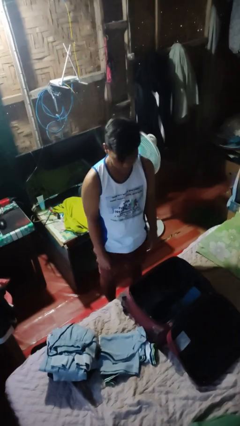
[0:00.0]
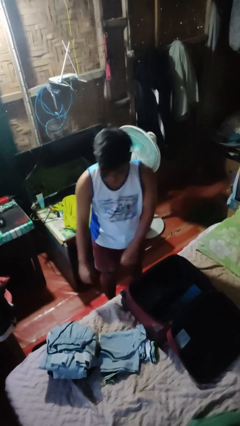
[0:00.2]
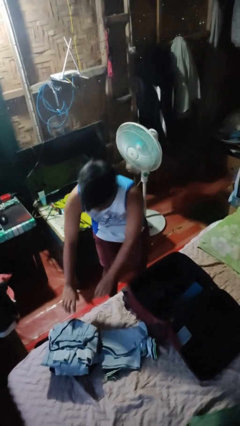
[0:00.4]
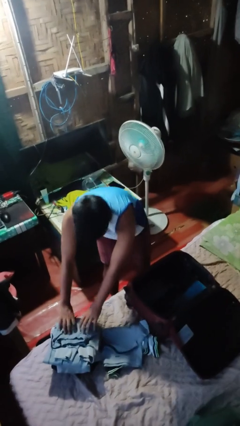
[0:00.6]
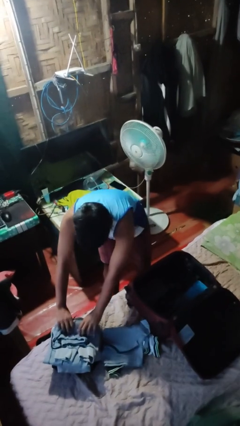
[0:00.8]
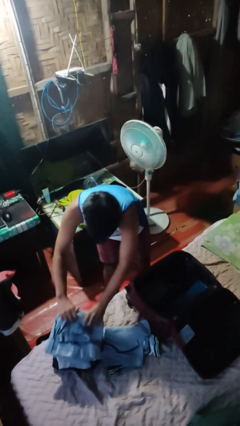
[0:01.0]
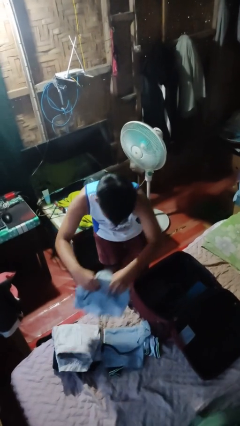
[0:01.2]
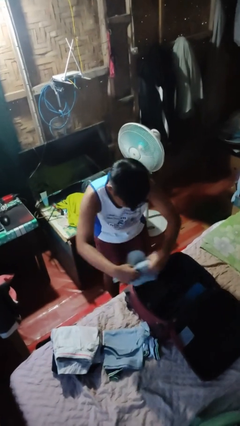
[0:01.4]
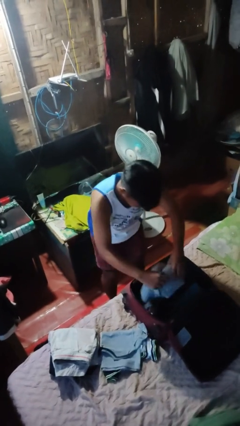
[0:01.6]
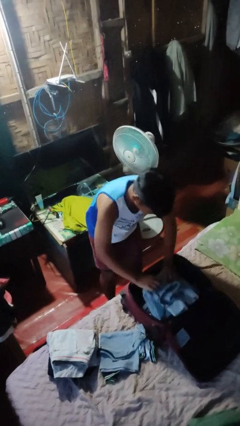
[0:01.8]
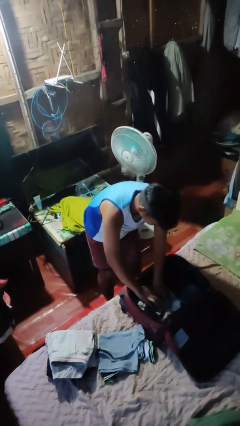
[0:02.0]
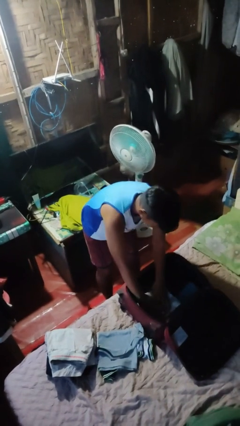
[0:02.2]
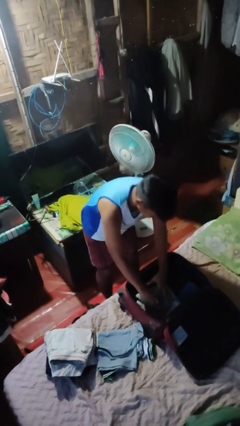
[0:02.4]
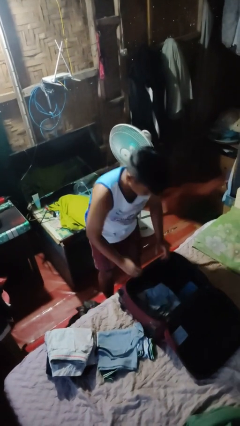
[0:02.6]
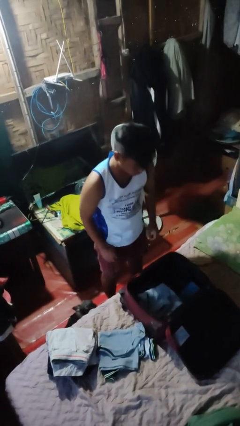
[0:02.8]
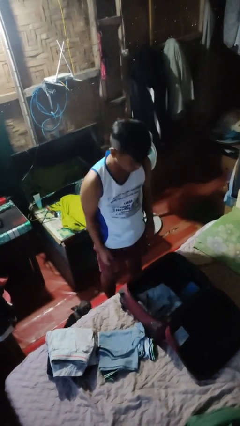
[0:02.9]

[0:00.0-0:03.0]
person loads clothes into suitcase

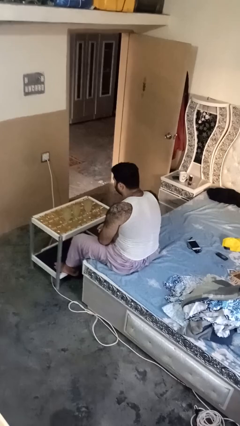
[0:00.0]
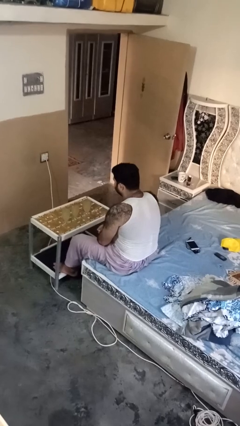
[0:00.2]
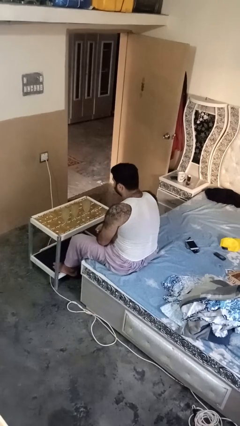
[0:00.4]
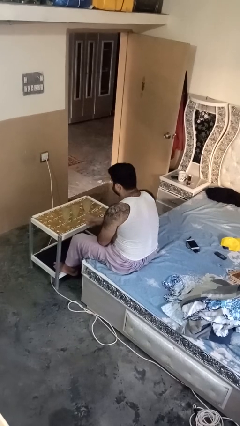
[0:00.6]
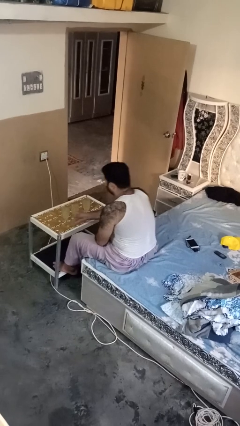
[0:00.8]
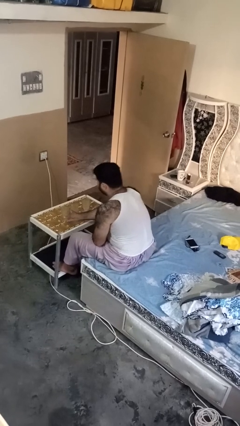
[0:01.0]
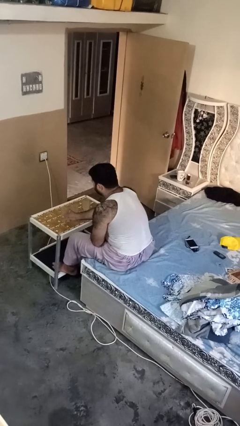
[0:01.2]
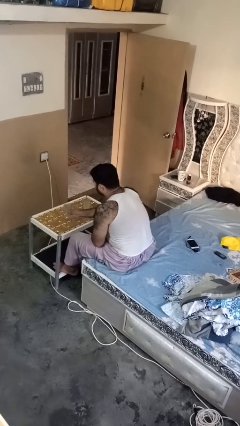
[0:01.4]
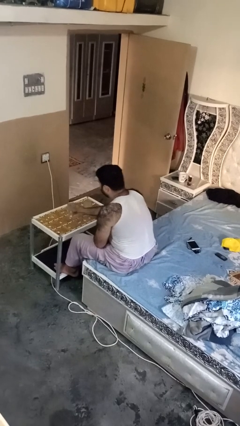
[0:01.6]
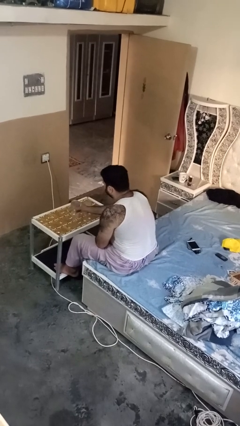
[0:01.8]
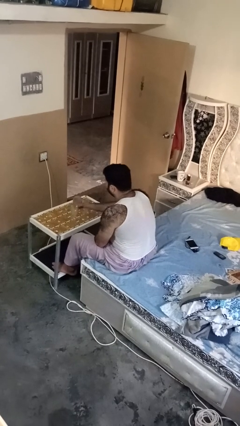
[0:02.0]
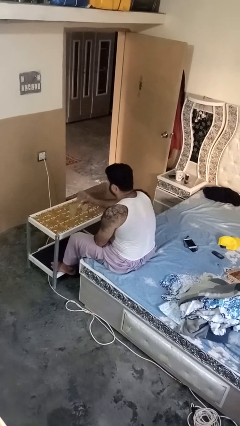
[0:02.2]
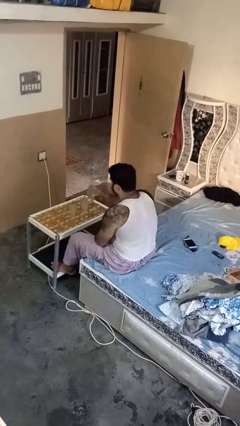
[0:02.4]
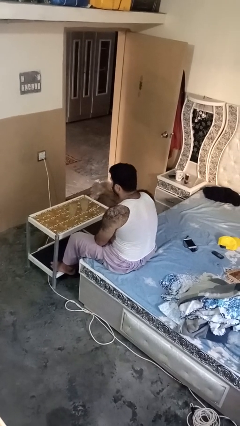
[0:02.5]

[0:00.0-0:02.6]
person picks up object from table

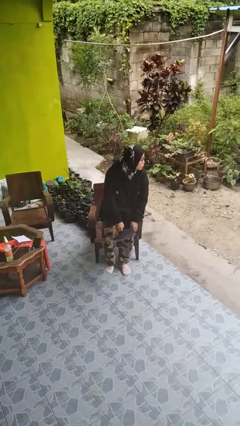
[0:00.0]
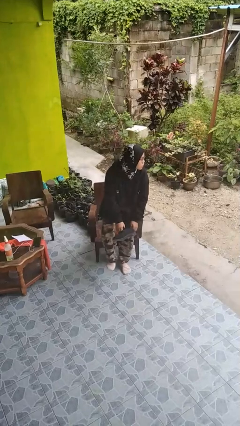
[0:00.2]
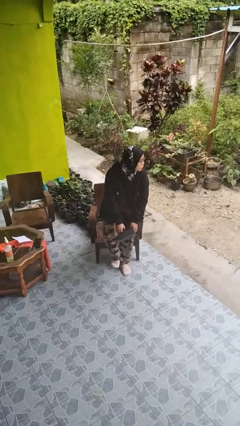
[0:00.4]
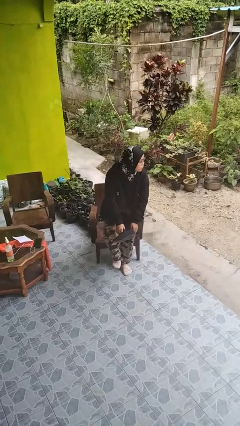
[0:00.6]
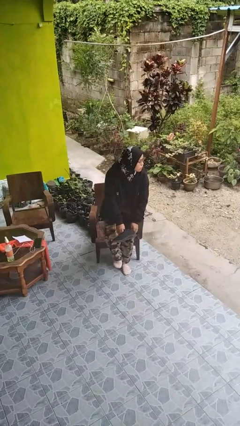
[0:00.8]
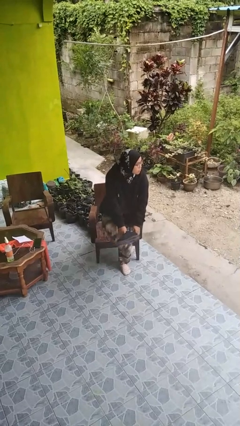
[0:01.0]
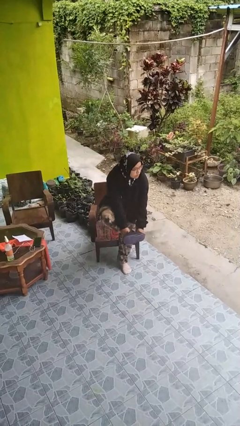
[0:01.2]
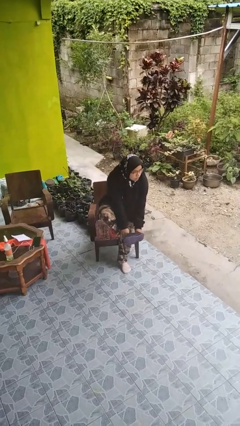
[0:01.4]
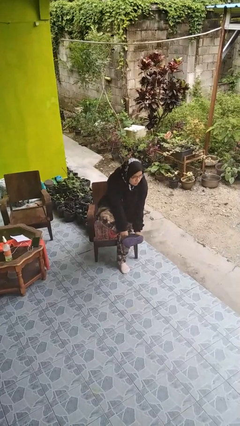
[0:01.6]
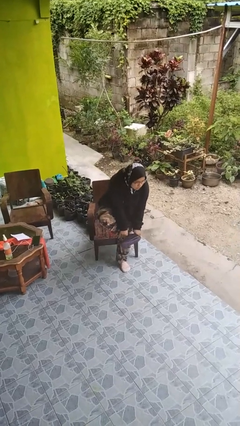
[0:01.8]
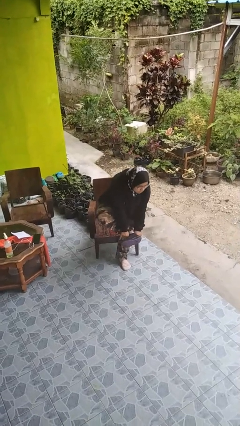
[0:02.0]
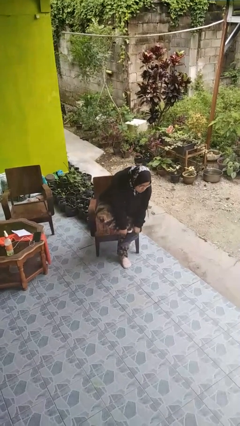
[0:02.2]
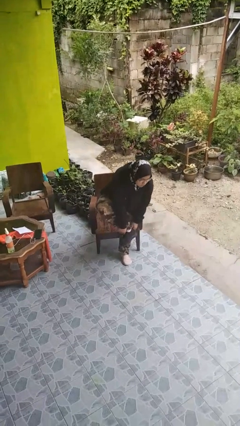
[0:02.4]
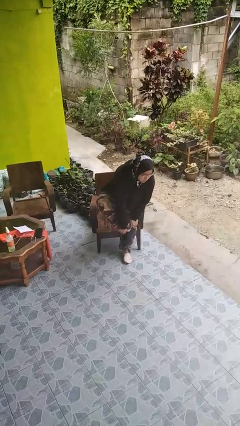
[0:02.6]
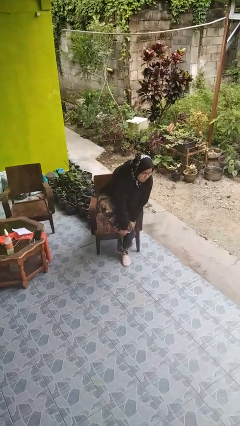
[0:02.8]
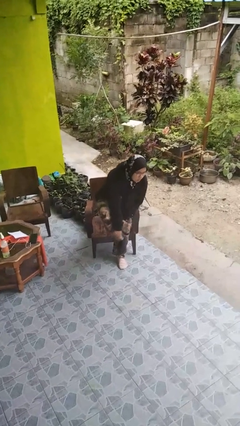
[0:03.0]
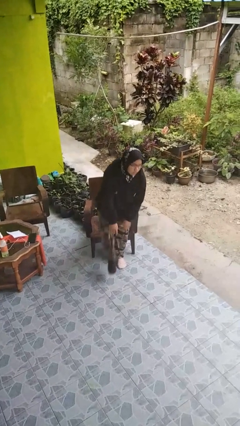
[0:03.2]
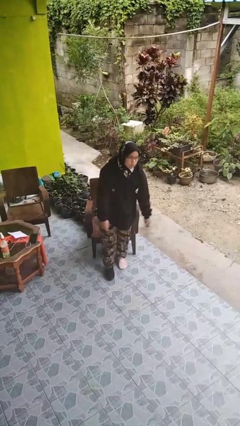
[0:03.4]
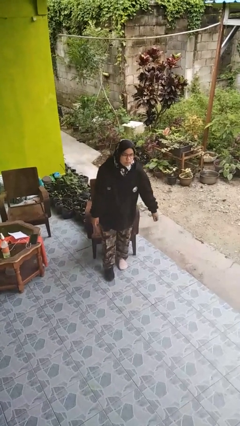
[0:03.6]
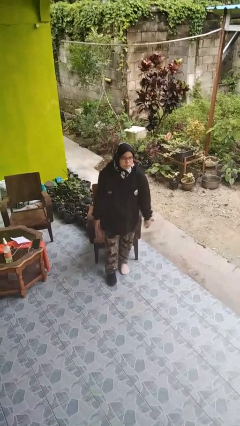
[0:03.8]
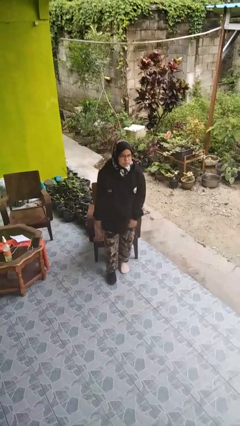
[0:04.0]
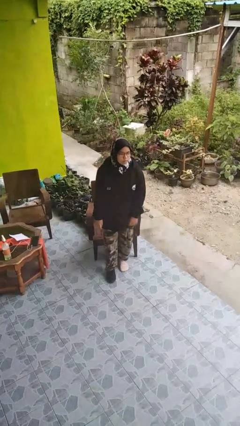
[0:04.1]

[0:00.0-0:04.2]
person puts on shoes

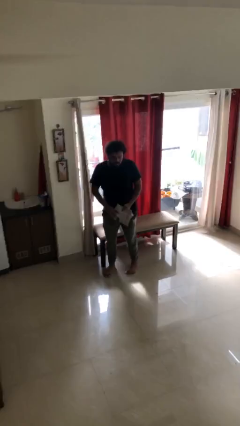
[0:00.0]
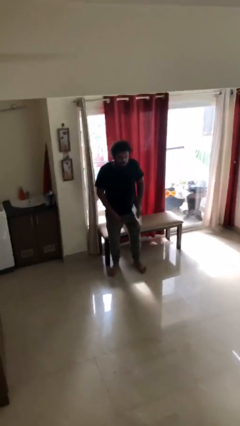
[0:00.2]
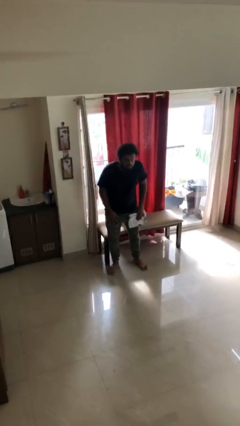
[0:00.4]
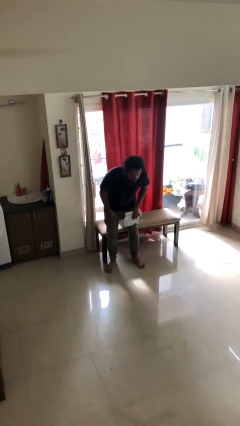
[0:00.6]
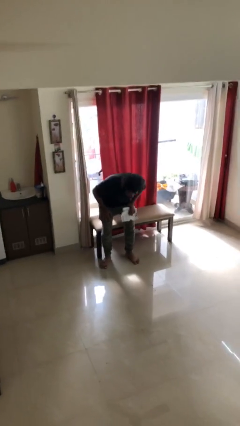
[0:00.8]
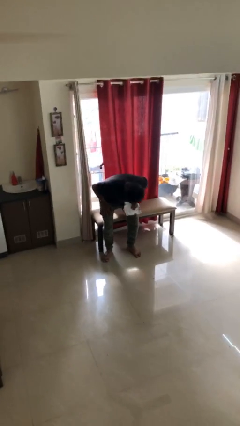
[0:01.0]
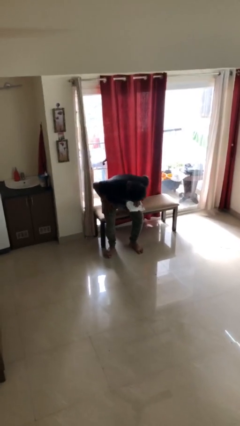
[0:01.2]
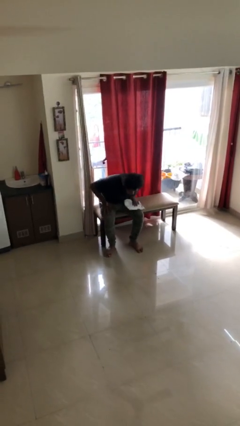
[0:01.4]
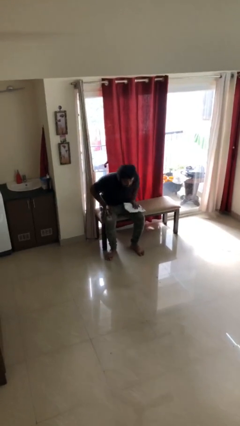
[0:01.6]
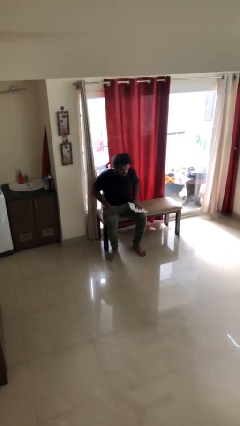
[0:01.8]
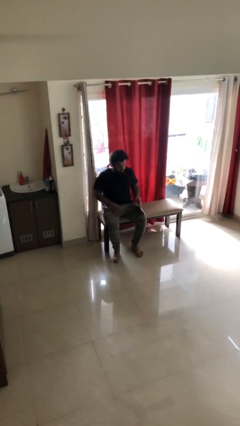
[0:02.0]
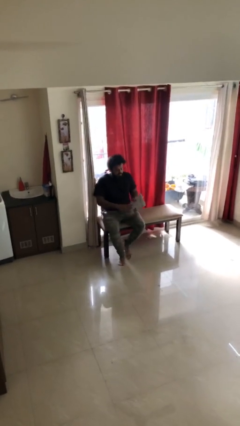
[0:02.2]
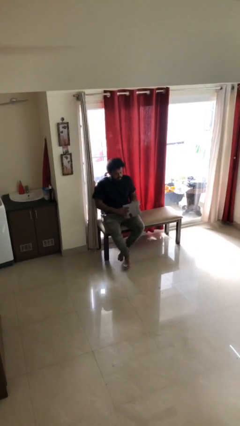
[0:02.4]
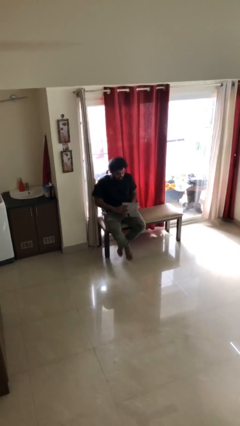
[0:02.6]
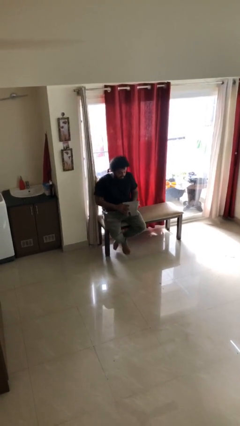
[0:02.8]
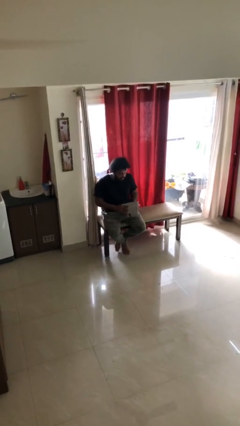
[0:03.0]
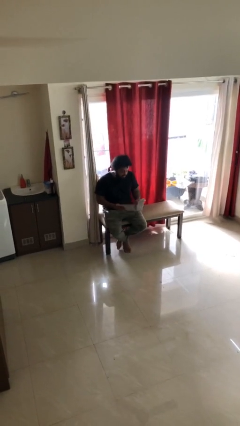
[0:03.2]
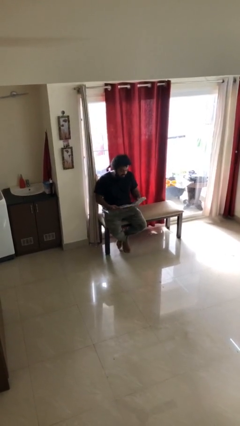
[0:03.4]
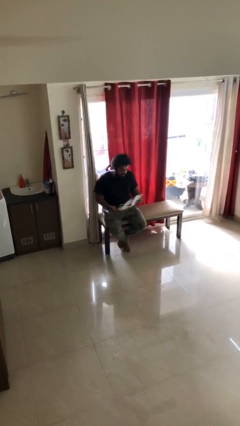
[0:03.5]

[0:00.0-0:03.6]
person sits down

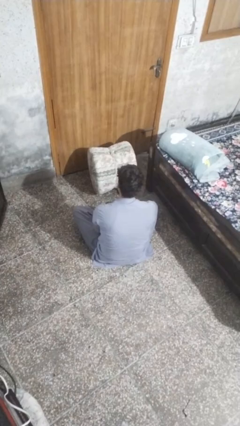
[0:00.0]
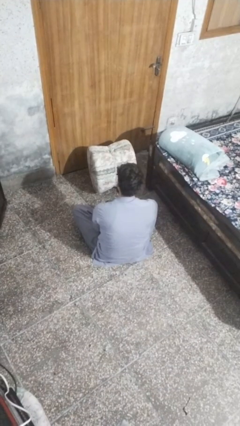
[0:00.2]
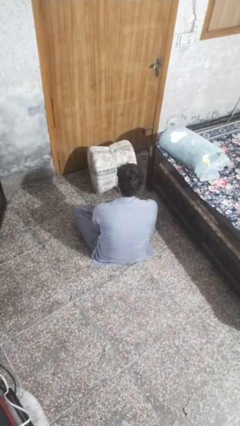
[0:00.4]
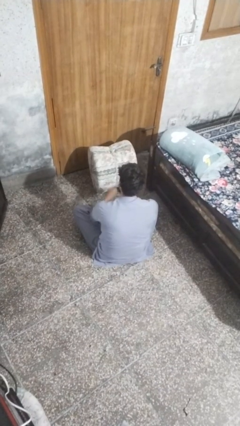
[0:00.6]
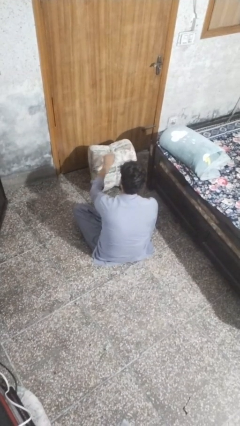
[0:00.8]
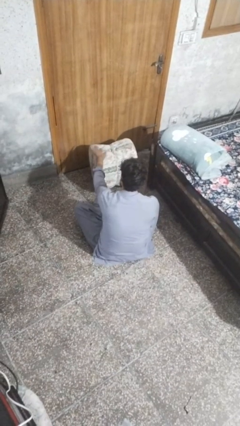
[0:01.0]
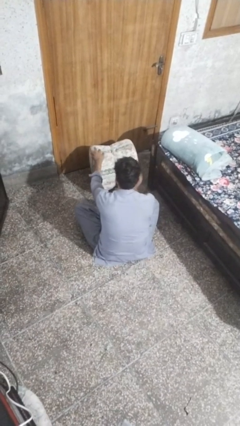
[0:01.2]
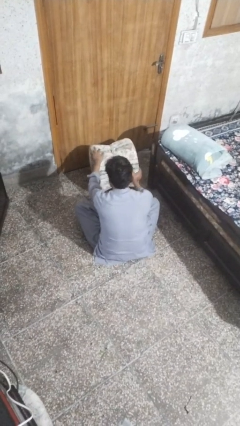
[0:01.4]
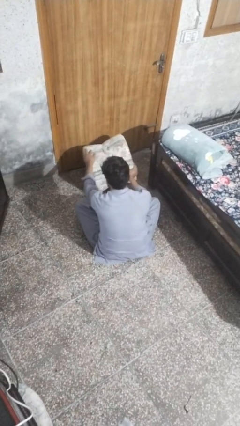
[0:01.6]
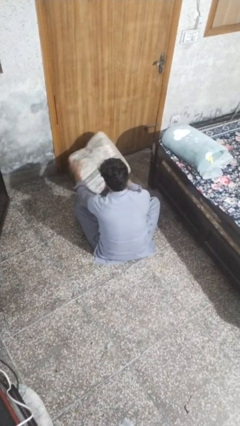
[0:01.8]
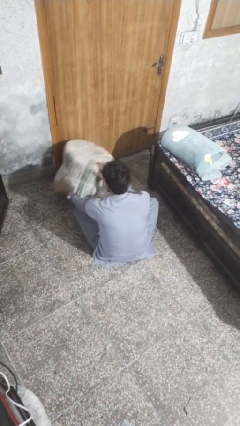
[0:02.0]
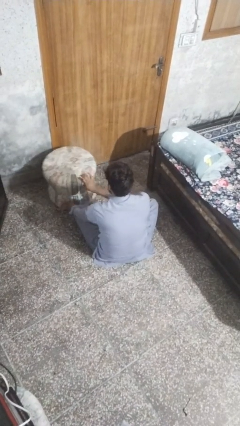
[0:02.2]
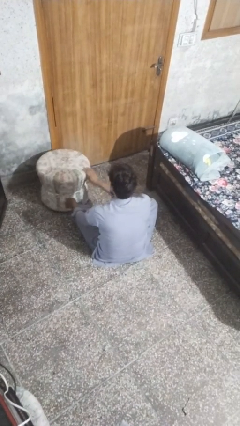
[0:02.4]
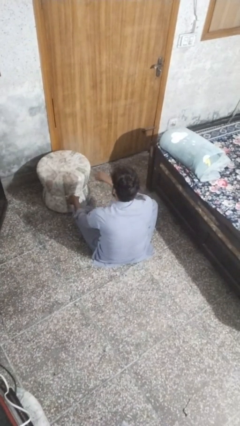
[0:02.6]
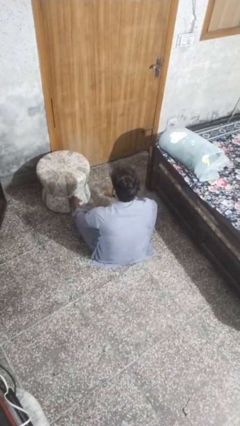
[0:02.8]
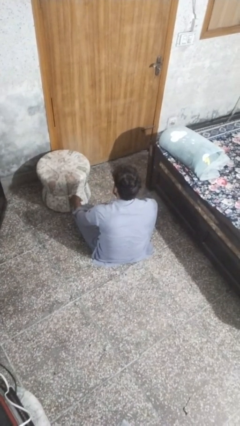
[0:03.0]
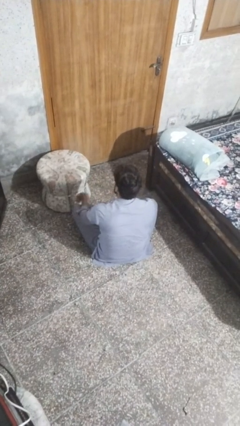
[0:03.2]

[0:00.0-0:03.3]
person sets upright furniture

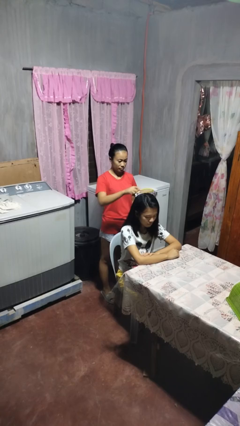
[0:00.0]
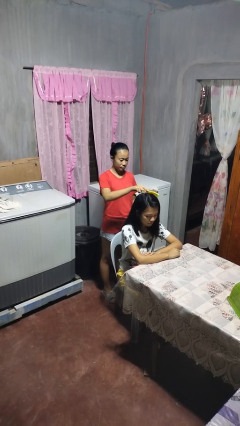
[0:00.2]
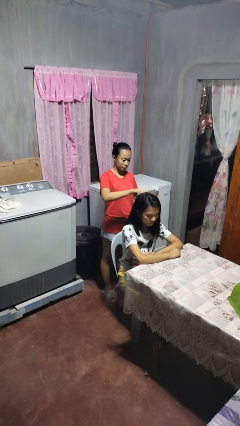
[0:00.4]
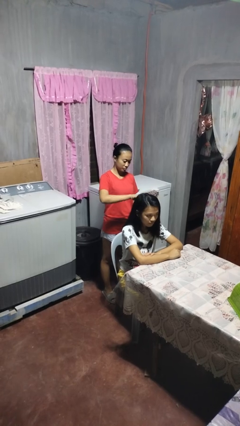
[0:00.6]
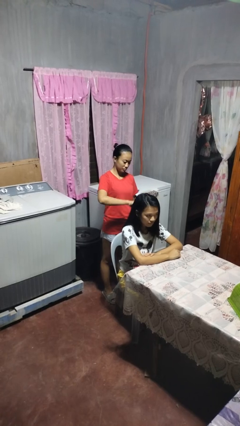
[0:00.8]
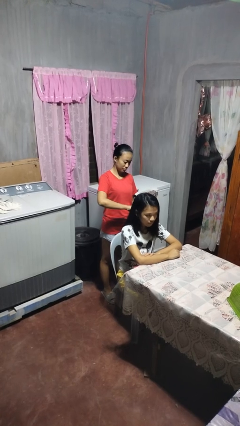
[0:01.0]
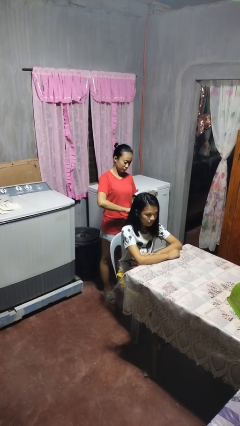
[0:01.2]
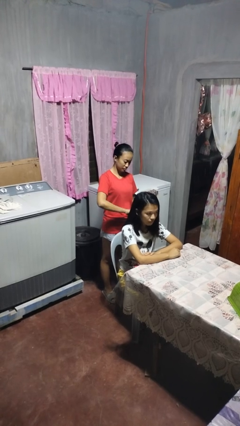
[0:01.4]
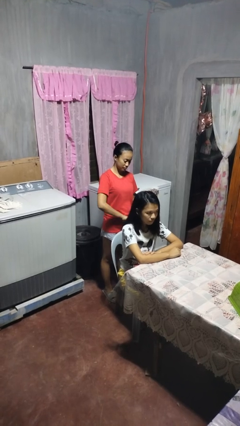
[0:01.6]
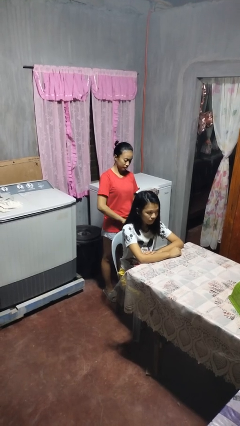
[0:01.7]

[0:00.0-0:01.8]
person brushes hair of person
